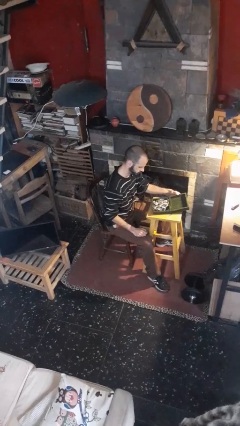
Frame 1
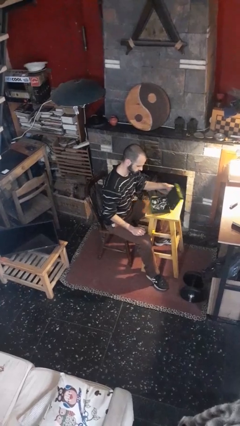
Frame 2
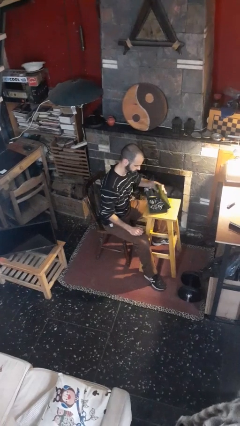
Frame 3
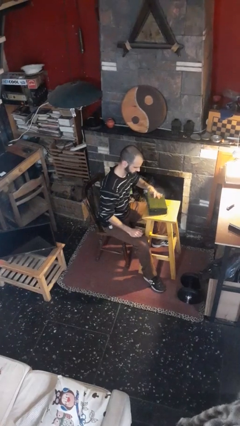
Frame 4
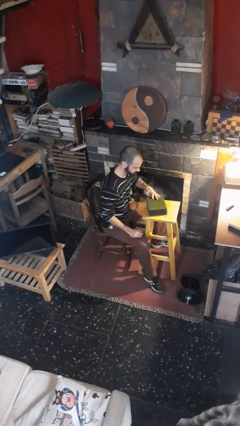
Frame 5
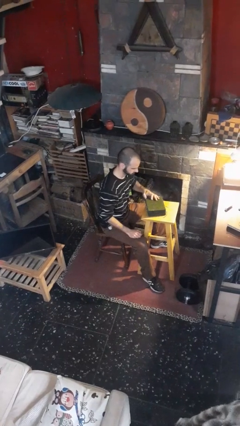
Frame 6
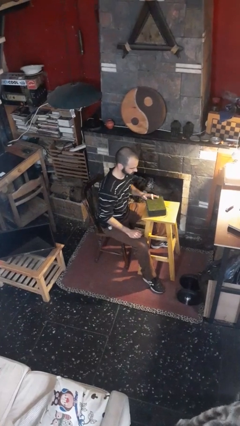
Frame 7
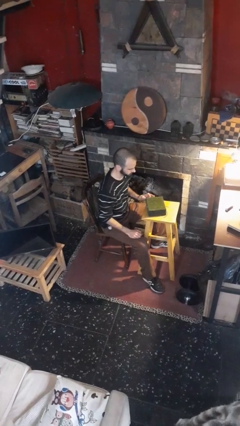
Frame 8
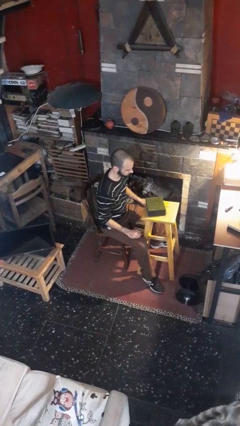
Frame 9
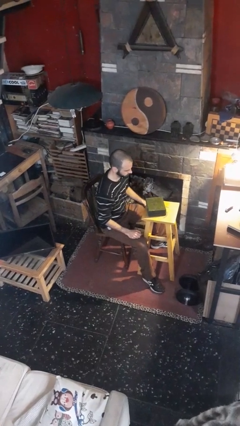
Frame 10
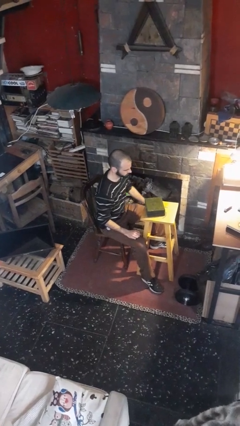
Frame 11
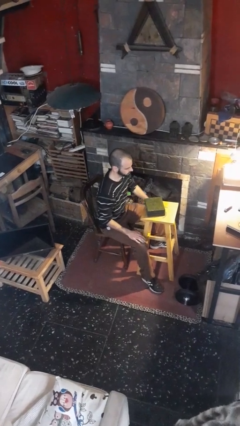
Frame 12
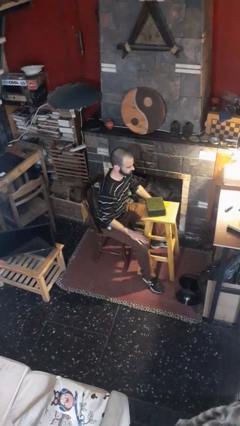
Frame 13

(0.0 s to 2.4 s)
person closes jewelry box

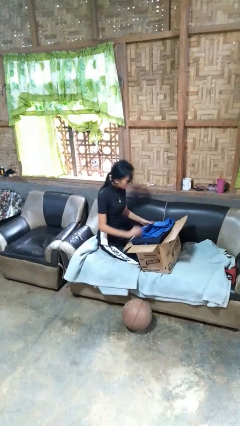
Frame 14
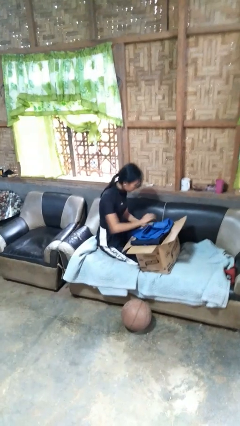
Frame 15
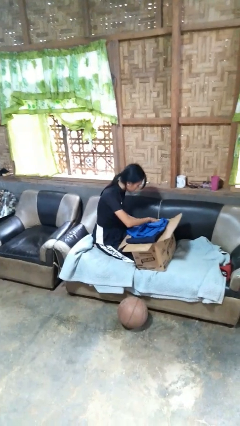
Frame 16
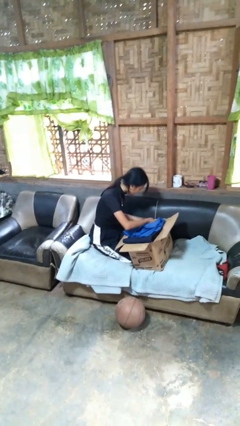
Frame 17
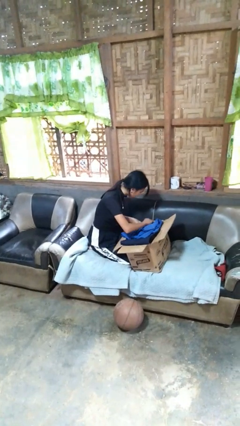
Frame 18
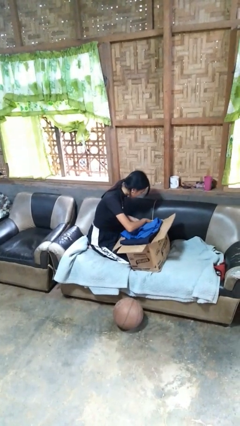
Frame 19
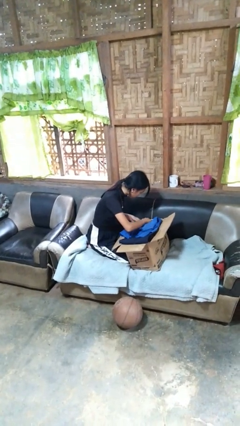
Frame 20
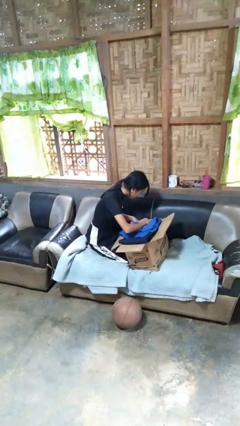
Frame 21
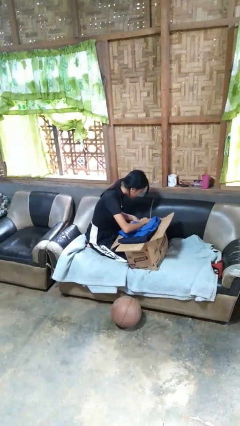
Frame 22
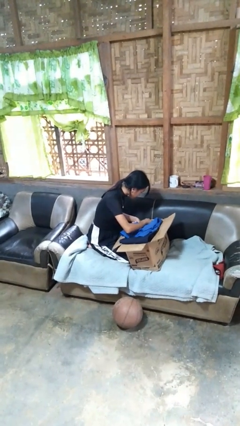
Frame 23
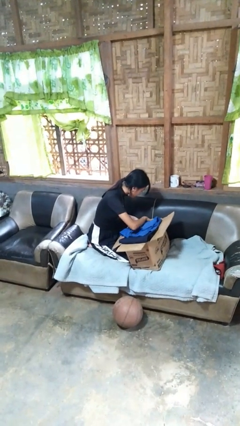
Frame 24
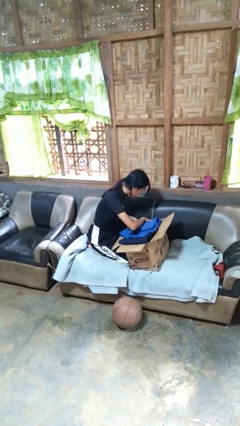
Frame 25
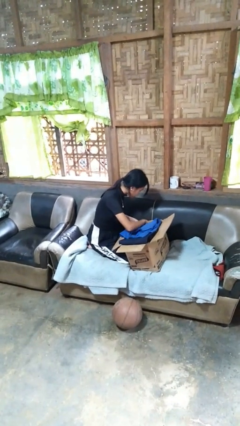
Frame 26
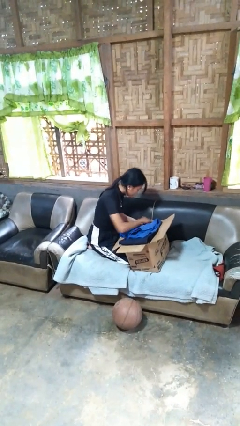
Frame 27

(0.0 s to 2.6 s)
person searches in box

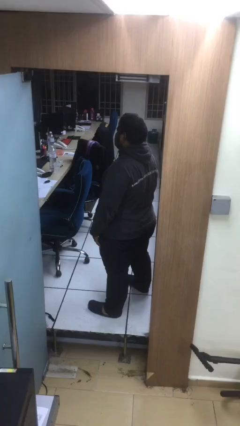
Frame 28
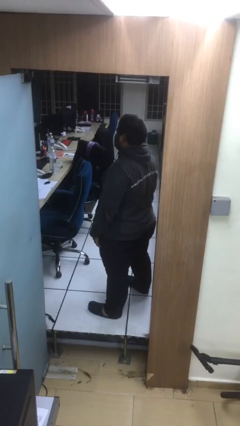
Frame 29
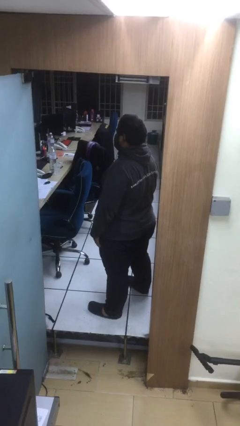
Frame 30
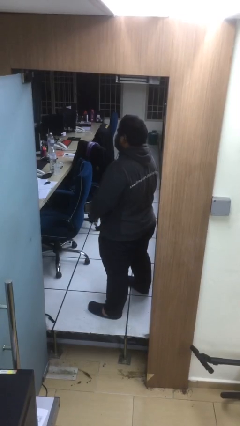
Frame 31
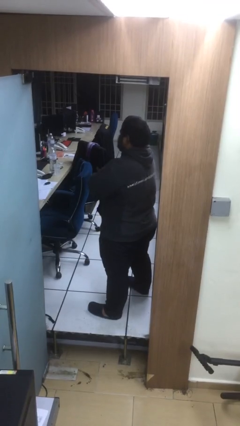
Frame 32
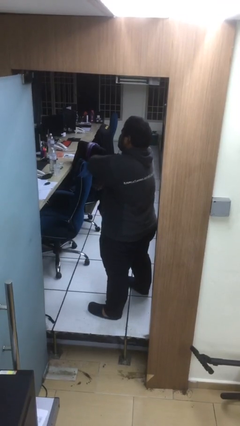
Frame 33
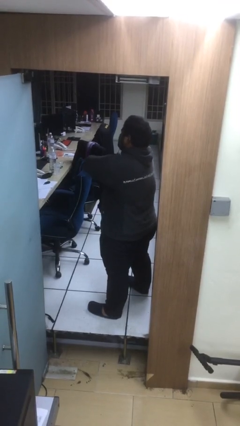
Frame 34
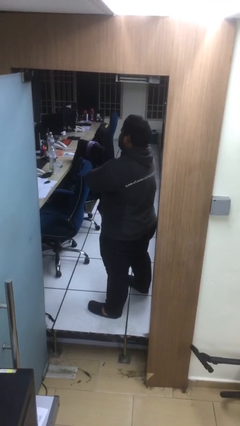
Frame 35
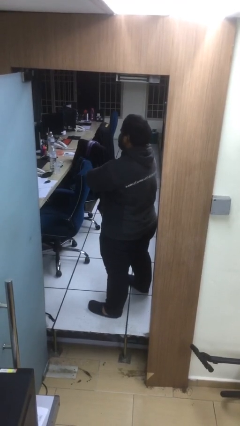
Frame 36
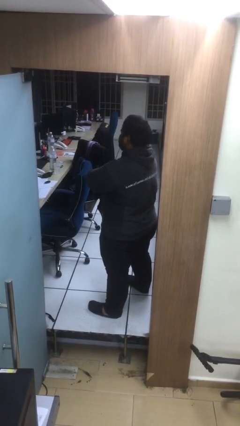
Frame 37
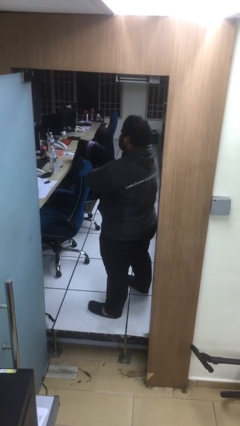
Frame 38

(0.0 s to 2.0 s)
person crosses arms

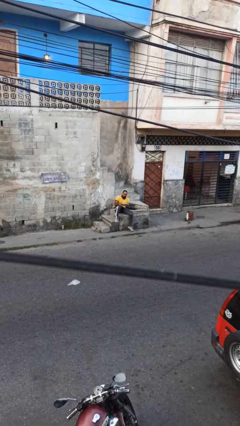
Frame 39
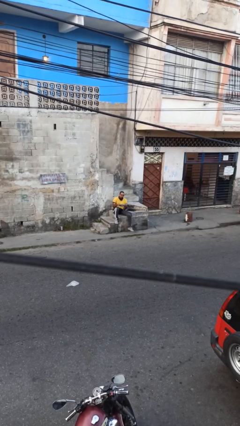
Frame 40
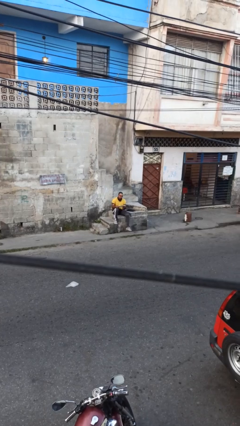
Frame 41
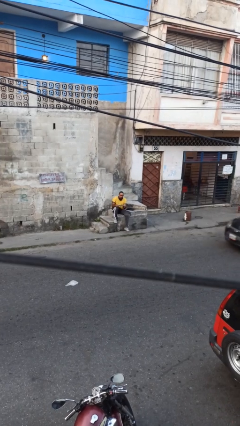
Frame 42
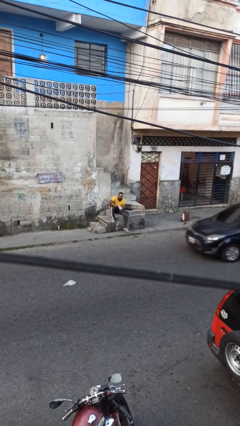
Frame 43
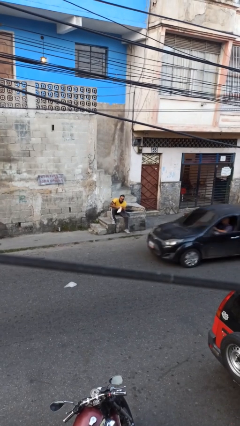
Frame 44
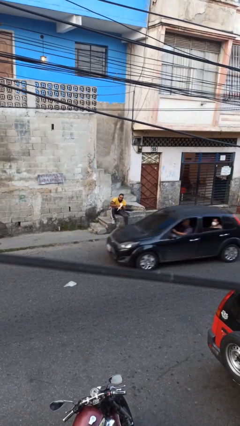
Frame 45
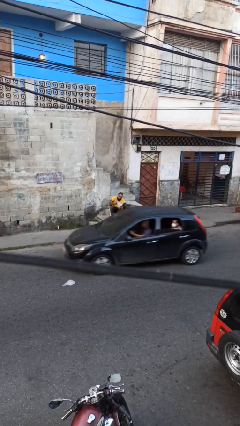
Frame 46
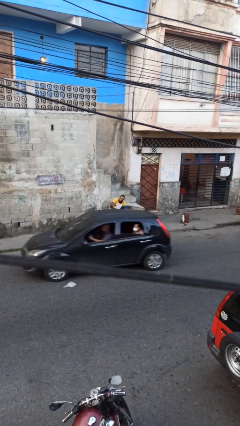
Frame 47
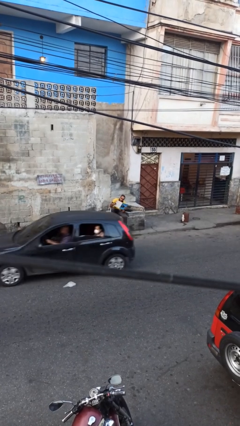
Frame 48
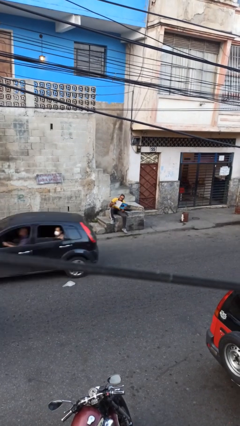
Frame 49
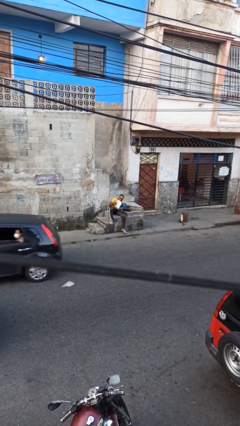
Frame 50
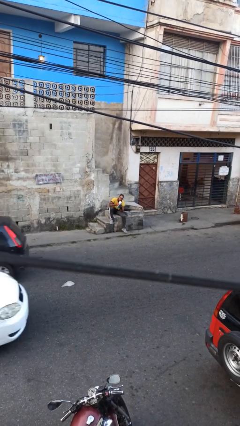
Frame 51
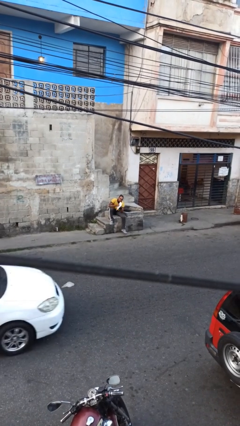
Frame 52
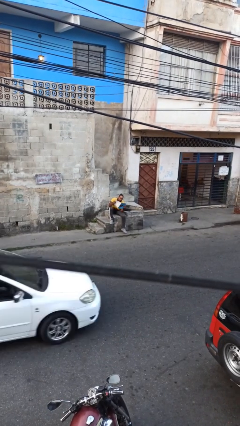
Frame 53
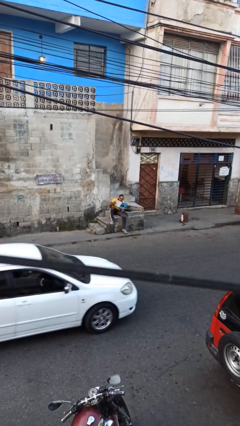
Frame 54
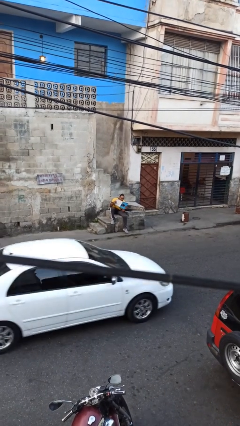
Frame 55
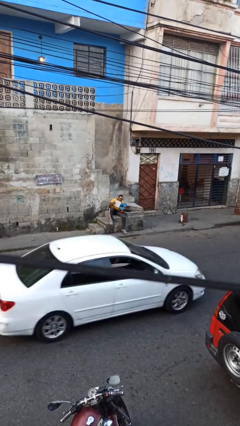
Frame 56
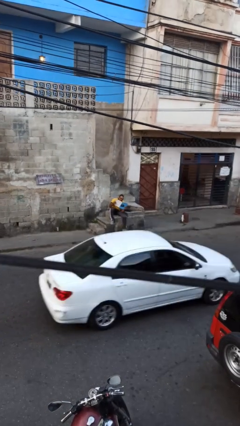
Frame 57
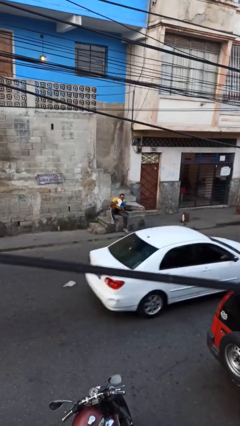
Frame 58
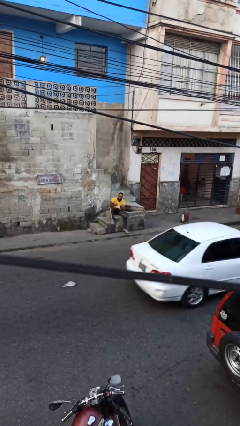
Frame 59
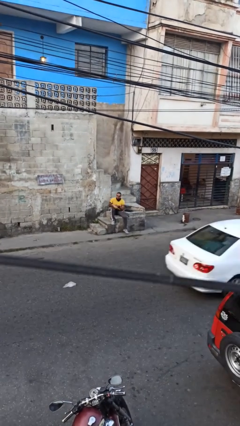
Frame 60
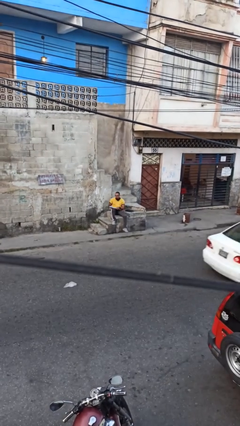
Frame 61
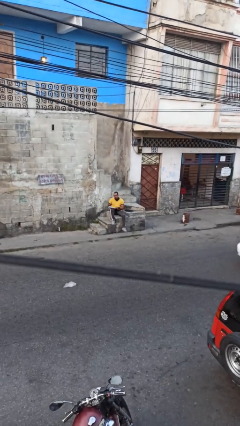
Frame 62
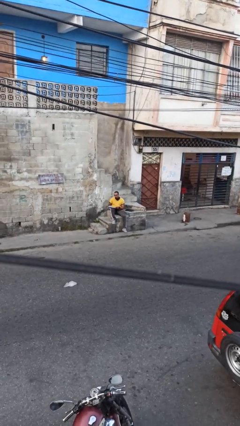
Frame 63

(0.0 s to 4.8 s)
person reads document

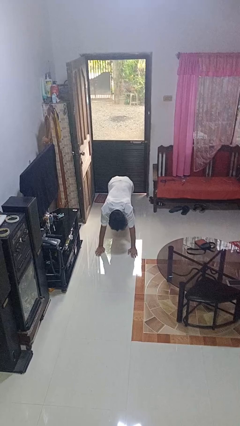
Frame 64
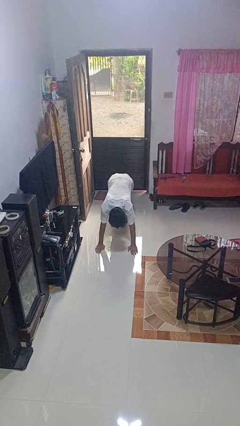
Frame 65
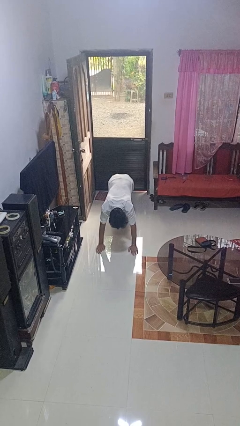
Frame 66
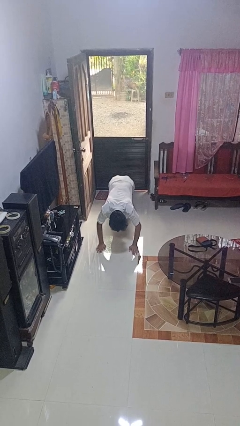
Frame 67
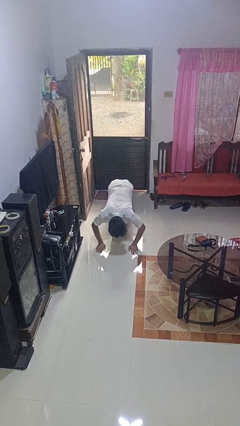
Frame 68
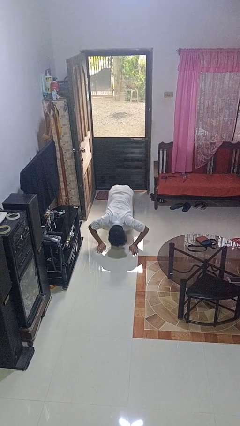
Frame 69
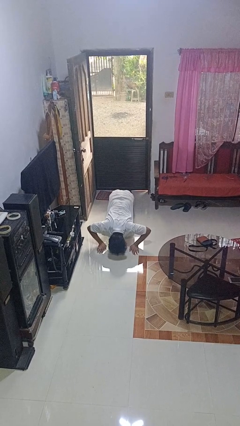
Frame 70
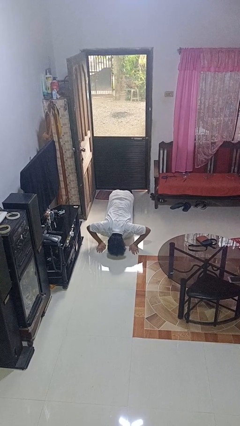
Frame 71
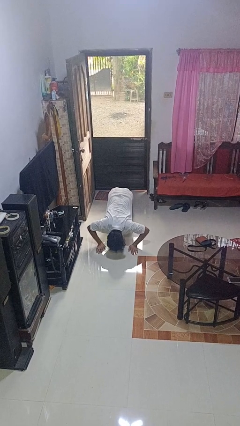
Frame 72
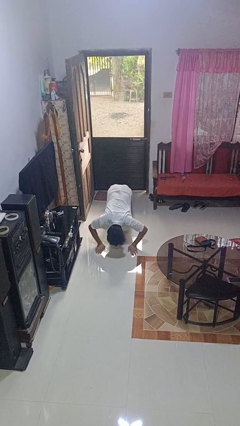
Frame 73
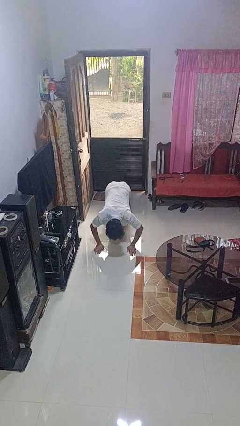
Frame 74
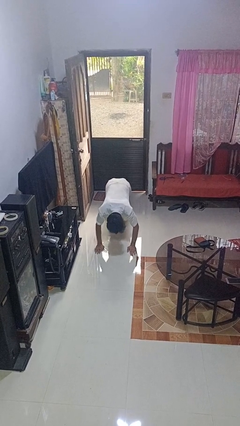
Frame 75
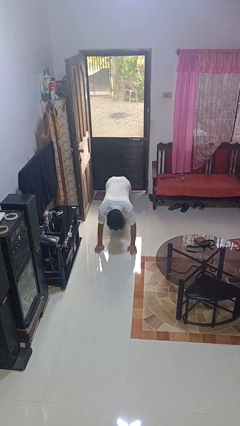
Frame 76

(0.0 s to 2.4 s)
person exercises with pushup

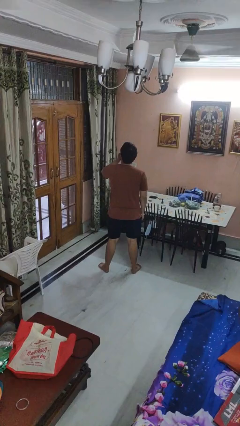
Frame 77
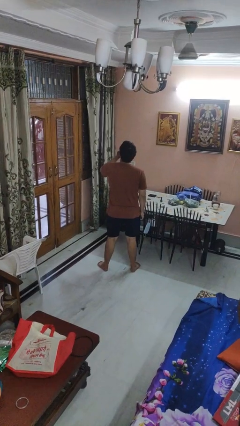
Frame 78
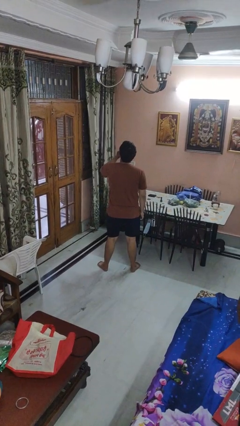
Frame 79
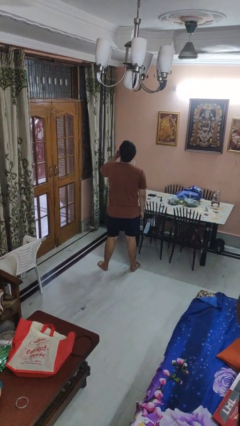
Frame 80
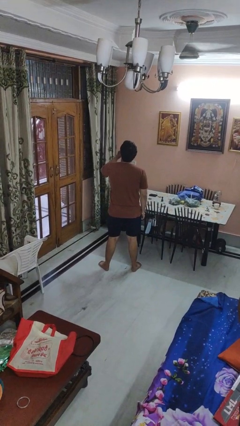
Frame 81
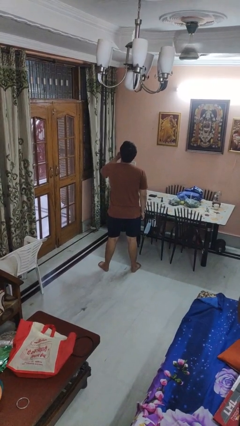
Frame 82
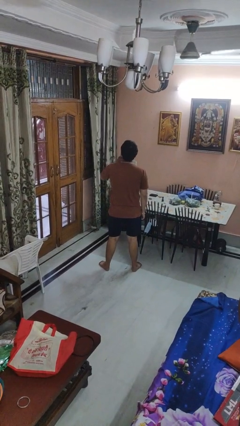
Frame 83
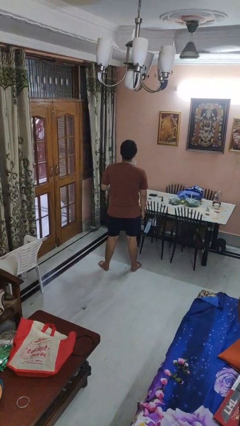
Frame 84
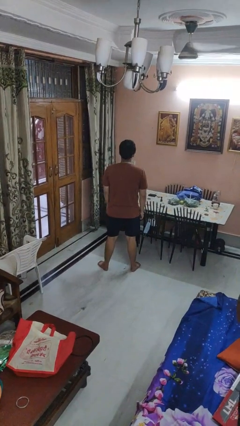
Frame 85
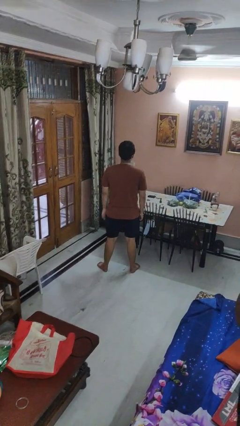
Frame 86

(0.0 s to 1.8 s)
person strokes chin

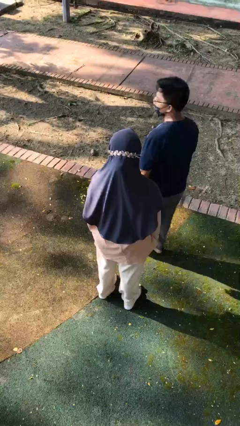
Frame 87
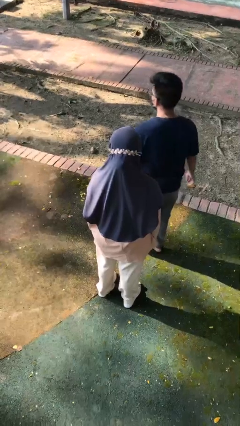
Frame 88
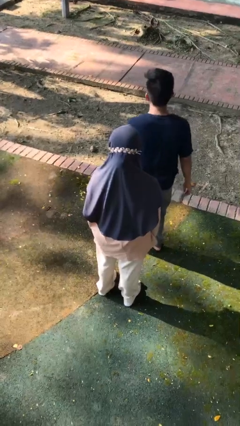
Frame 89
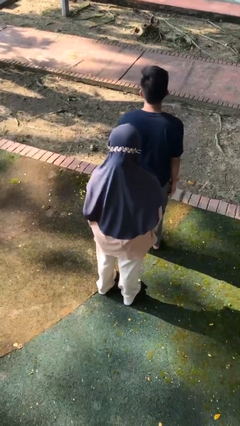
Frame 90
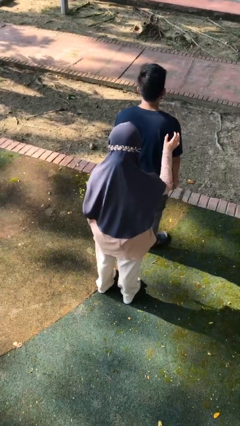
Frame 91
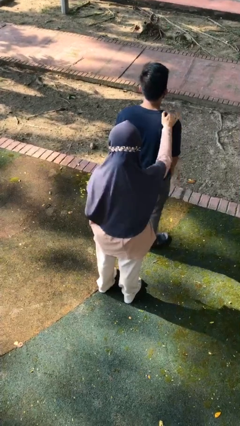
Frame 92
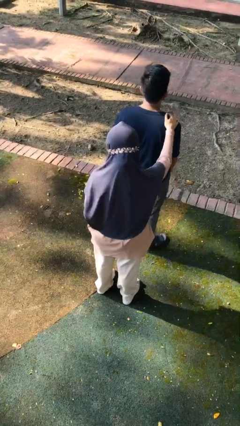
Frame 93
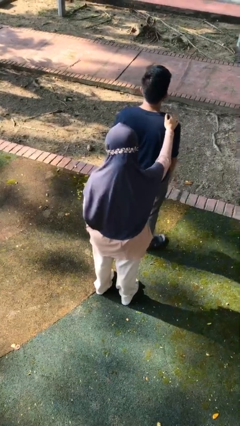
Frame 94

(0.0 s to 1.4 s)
person grabs person by shoulder
